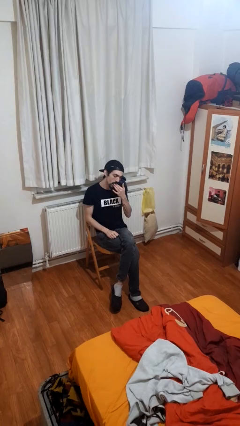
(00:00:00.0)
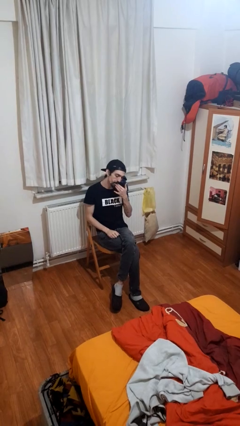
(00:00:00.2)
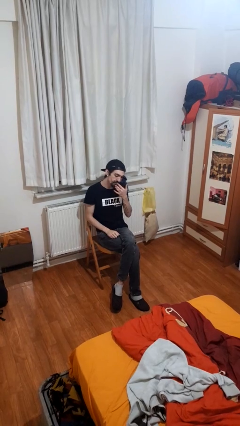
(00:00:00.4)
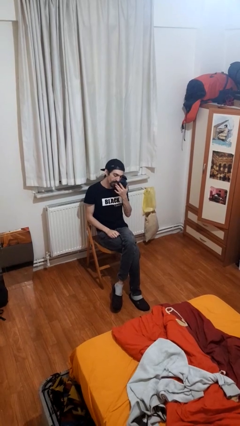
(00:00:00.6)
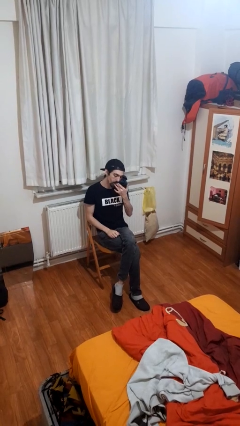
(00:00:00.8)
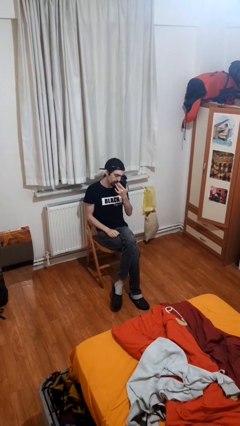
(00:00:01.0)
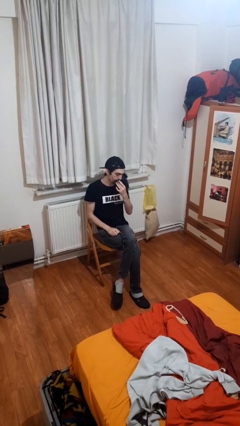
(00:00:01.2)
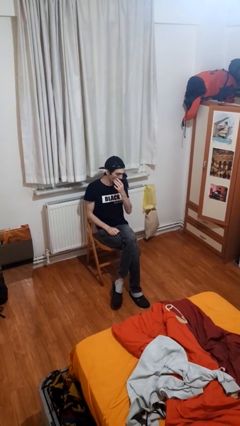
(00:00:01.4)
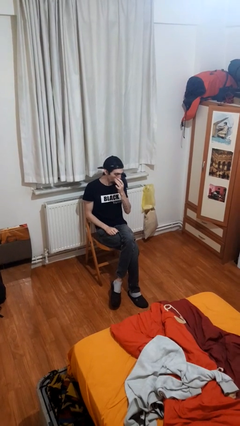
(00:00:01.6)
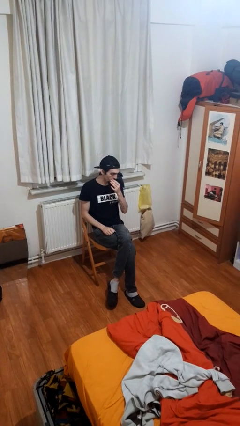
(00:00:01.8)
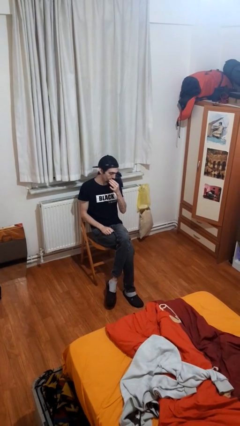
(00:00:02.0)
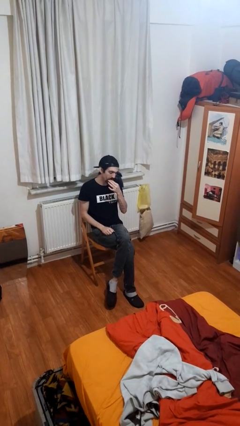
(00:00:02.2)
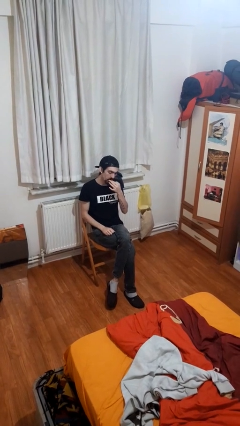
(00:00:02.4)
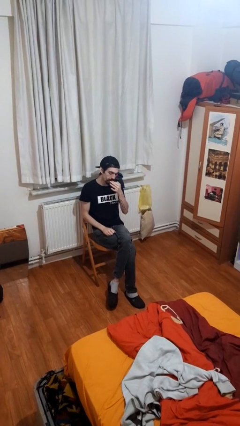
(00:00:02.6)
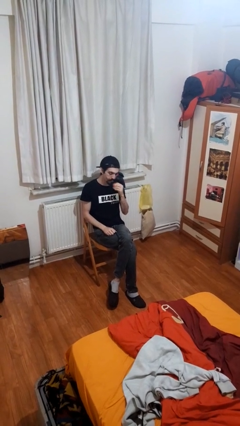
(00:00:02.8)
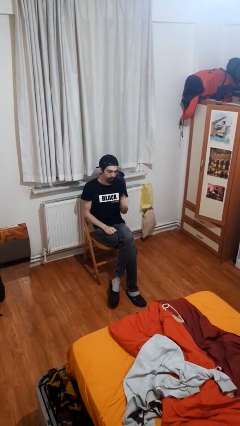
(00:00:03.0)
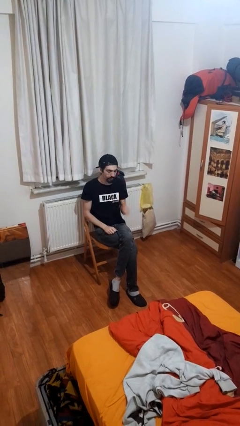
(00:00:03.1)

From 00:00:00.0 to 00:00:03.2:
person licks fingers

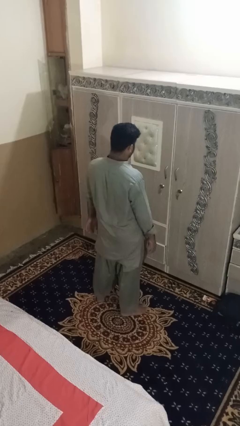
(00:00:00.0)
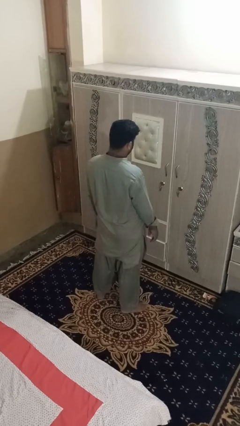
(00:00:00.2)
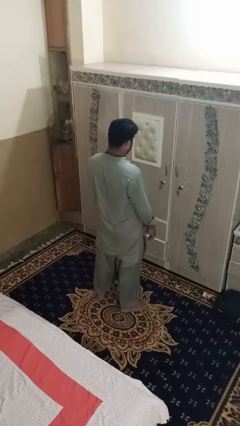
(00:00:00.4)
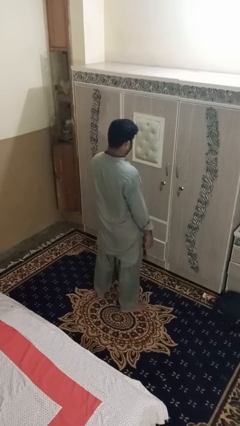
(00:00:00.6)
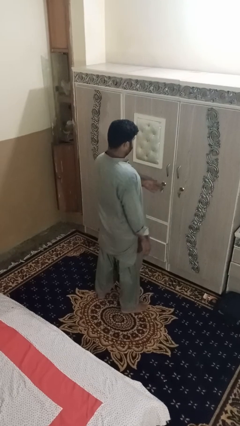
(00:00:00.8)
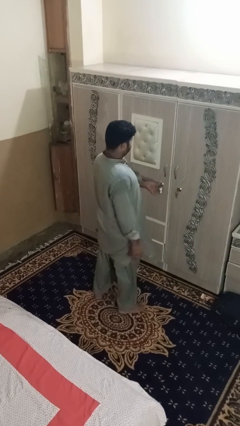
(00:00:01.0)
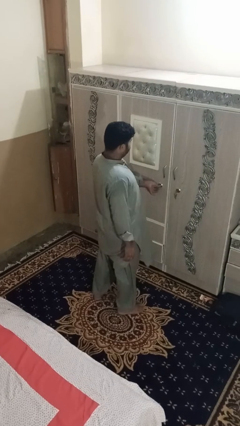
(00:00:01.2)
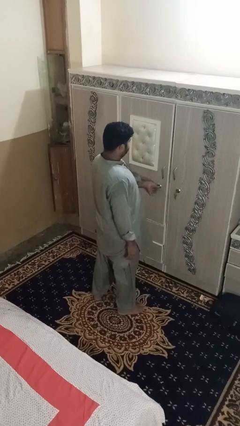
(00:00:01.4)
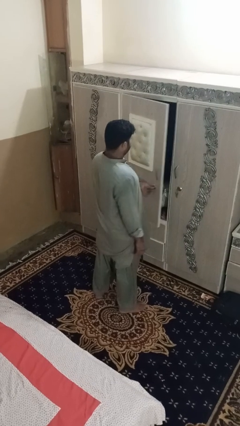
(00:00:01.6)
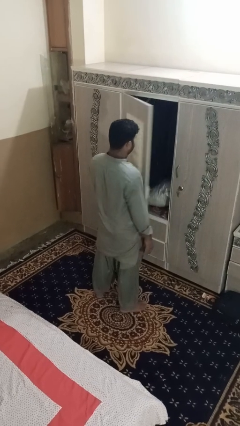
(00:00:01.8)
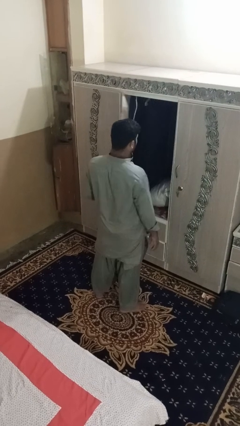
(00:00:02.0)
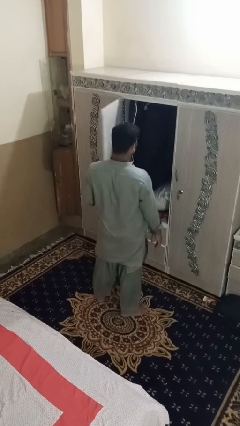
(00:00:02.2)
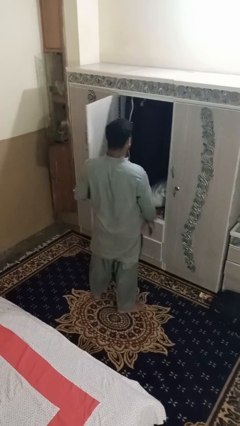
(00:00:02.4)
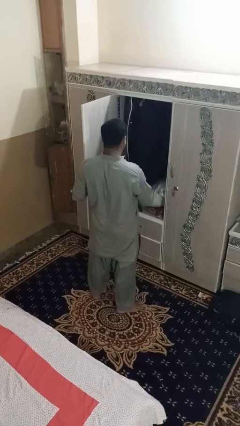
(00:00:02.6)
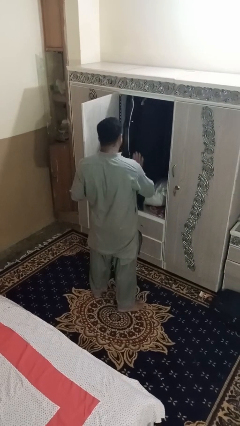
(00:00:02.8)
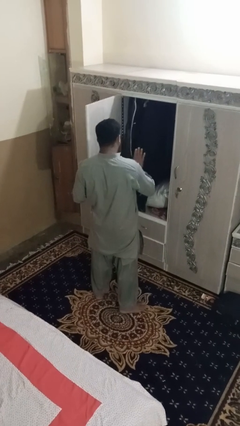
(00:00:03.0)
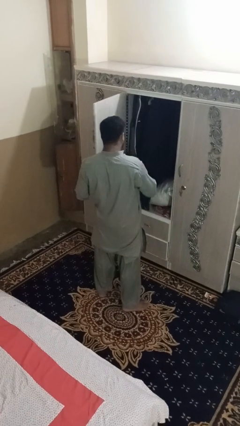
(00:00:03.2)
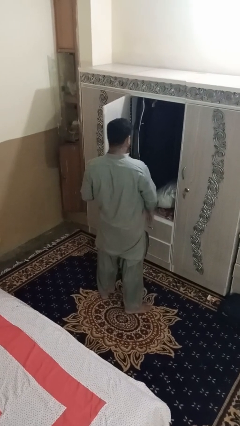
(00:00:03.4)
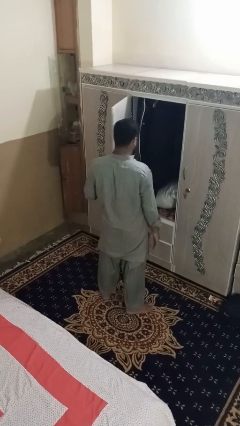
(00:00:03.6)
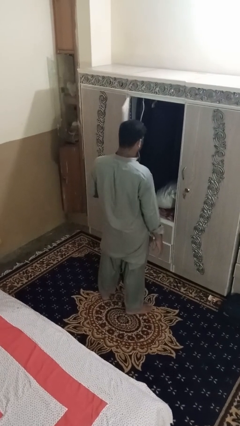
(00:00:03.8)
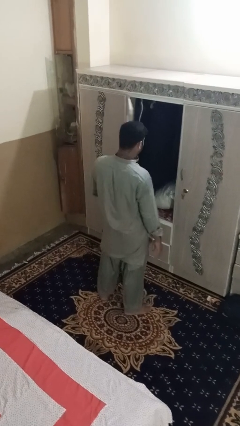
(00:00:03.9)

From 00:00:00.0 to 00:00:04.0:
person opens dresser drawer

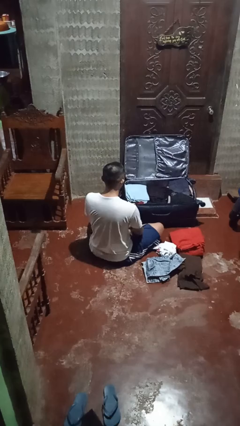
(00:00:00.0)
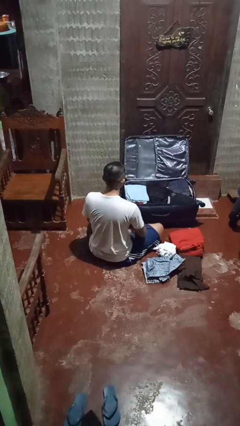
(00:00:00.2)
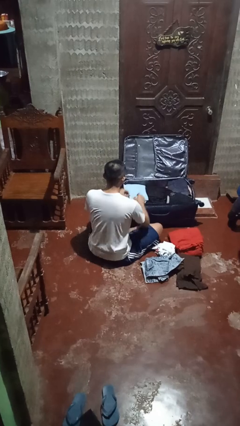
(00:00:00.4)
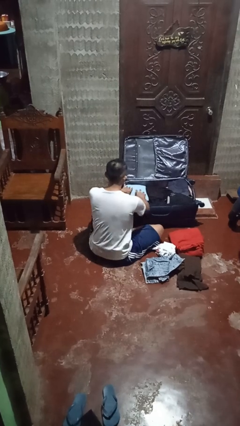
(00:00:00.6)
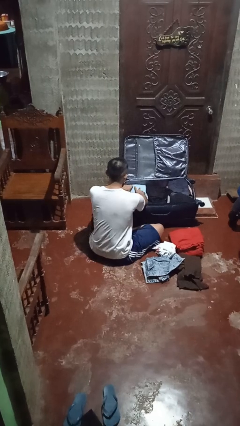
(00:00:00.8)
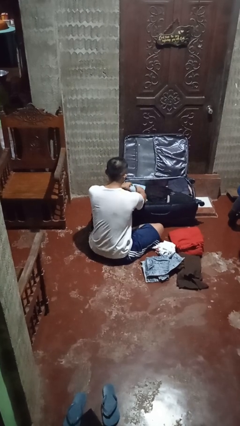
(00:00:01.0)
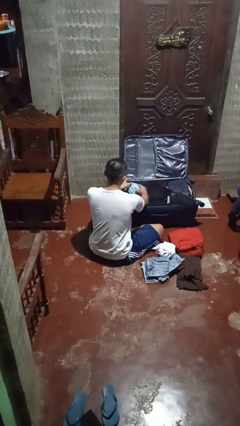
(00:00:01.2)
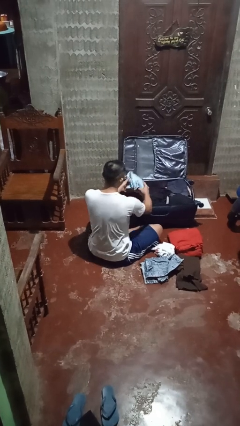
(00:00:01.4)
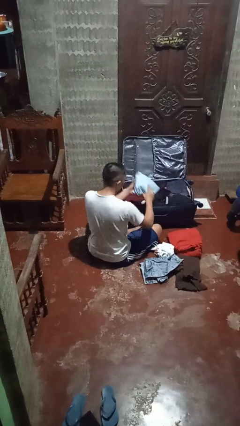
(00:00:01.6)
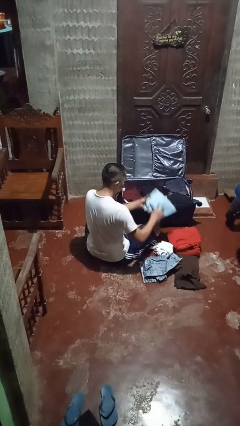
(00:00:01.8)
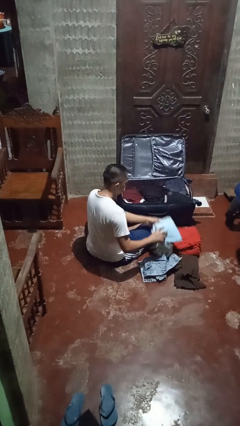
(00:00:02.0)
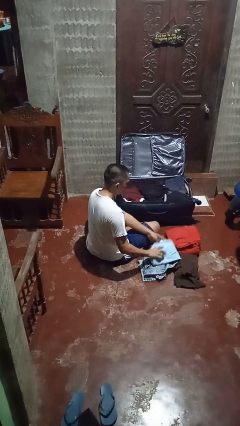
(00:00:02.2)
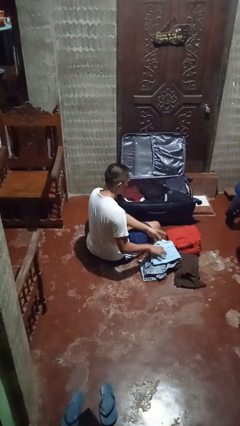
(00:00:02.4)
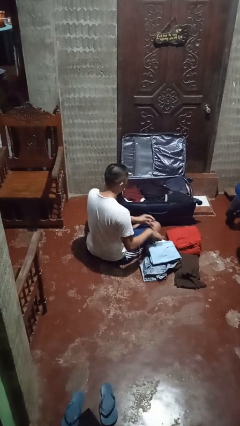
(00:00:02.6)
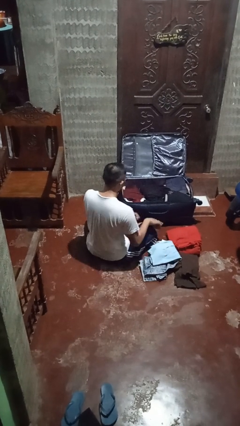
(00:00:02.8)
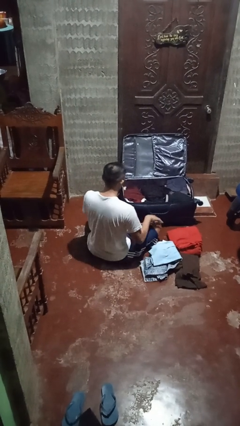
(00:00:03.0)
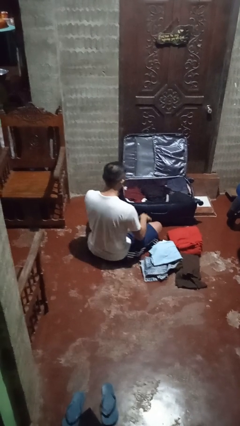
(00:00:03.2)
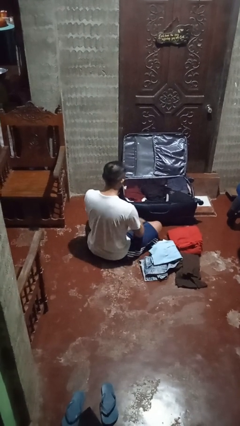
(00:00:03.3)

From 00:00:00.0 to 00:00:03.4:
person unloads clothes from suitcase

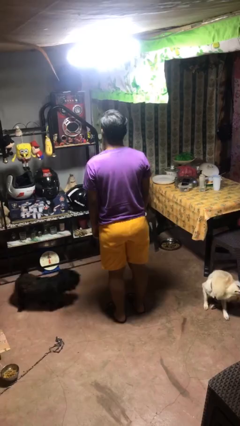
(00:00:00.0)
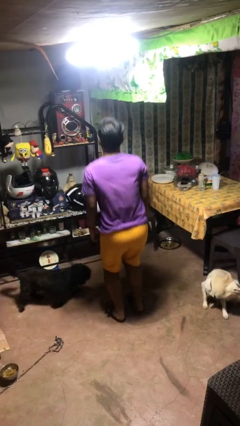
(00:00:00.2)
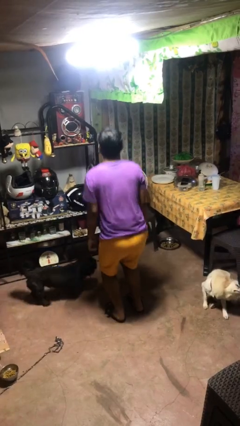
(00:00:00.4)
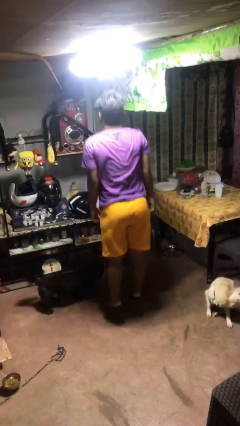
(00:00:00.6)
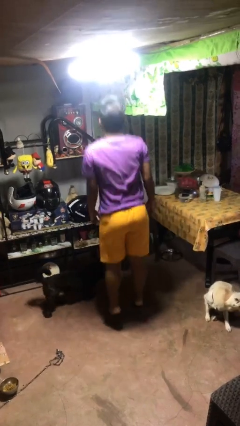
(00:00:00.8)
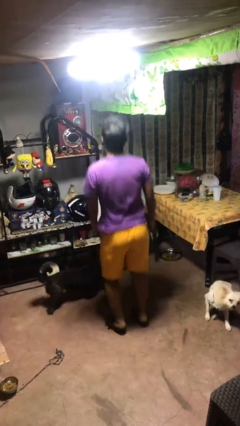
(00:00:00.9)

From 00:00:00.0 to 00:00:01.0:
person jumps

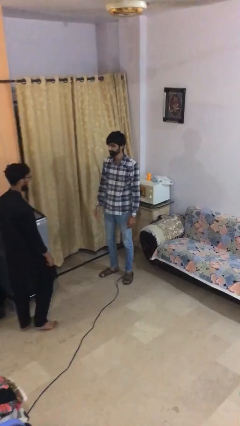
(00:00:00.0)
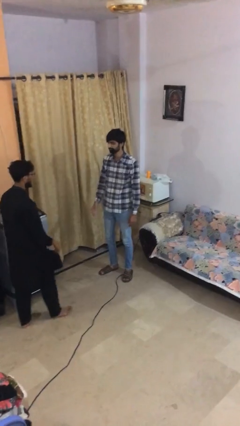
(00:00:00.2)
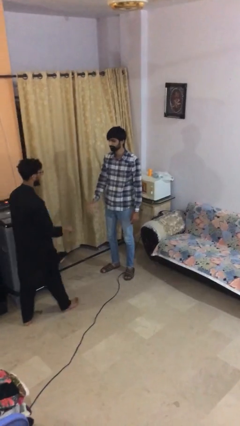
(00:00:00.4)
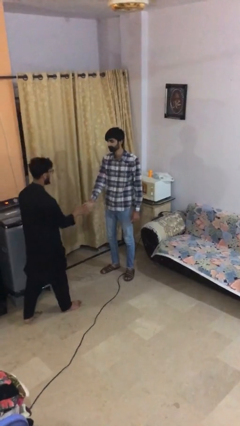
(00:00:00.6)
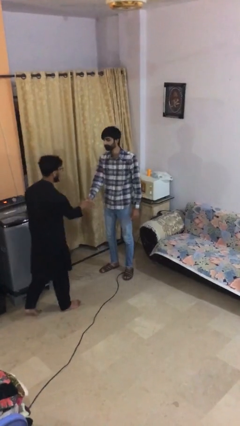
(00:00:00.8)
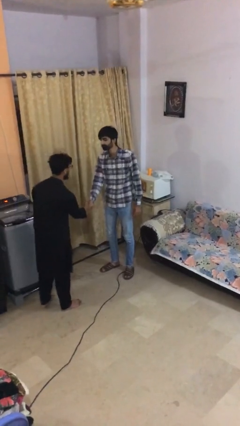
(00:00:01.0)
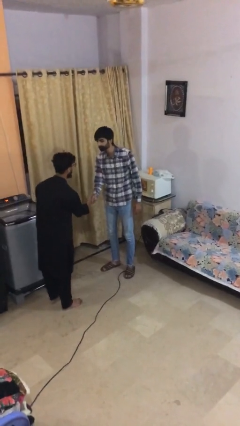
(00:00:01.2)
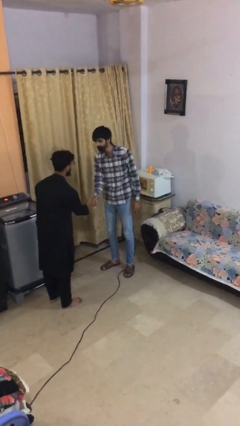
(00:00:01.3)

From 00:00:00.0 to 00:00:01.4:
person shakes hand

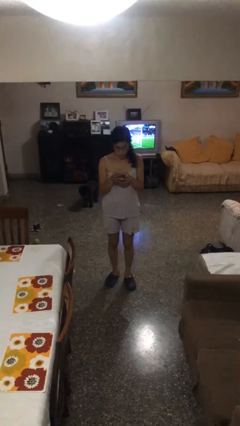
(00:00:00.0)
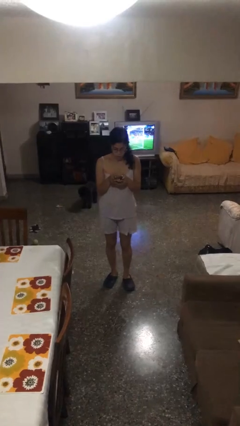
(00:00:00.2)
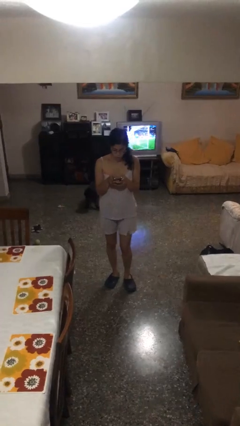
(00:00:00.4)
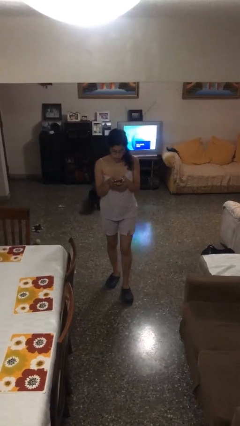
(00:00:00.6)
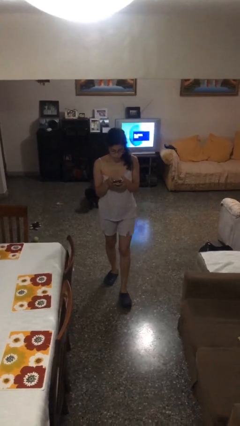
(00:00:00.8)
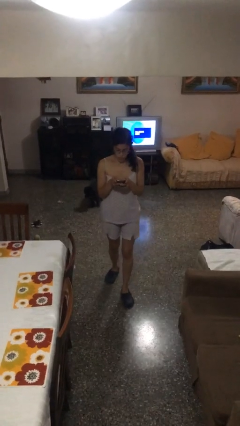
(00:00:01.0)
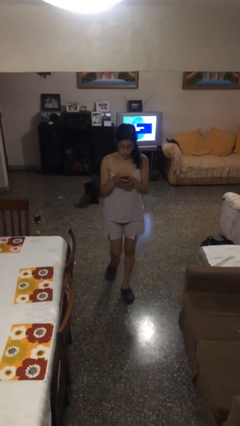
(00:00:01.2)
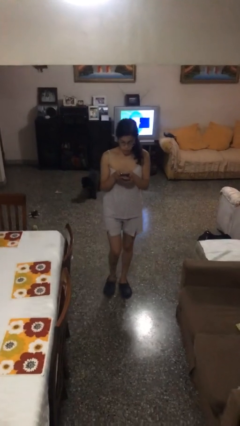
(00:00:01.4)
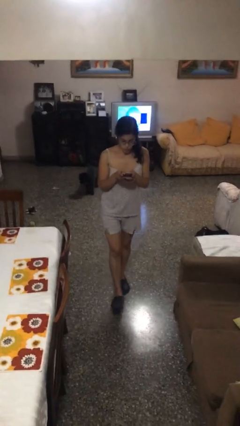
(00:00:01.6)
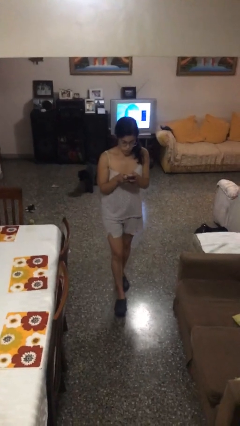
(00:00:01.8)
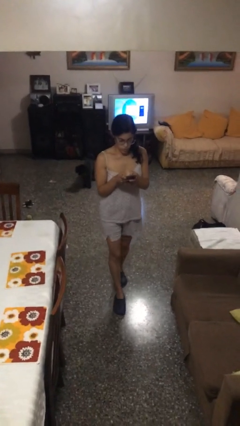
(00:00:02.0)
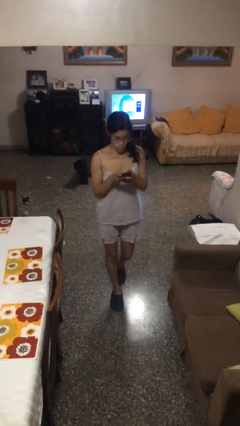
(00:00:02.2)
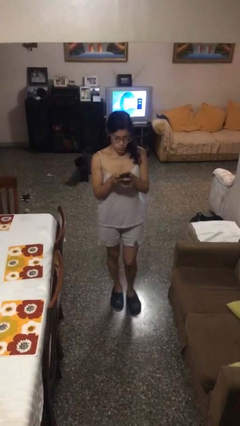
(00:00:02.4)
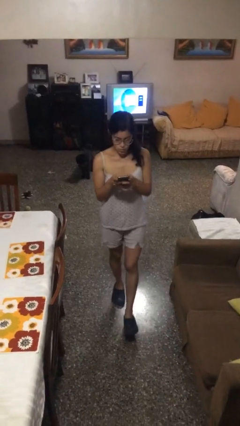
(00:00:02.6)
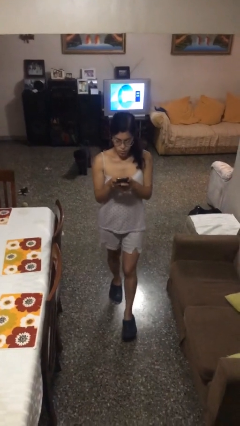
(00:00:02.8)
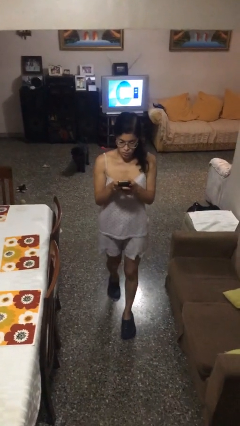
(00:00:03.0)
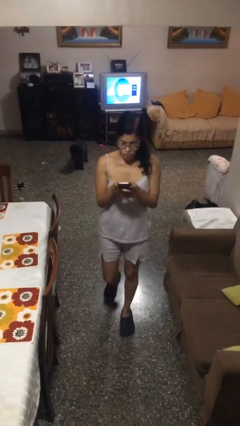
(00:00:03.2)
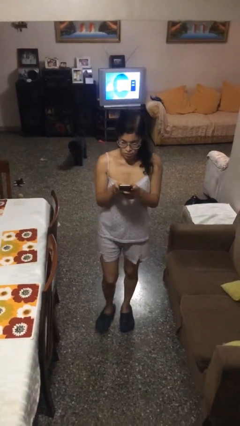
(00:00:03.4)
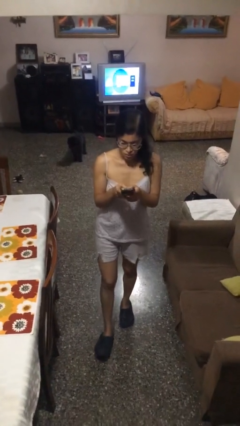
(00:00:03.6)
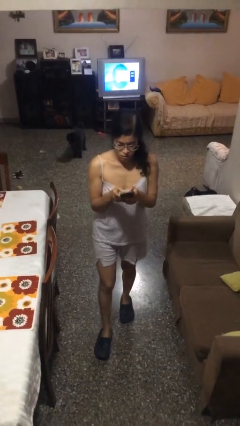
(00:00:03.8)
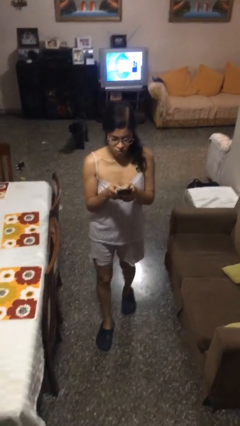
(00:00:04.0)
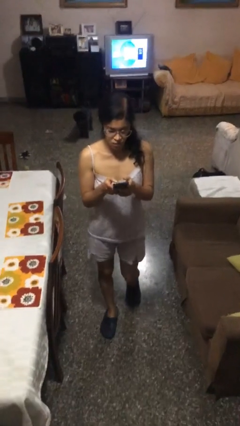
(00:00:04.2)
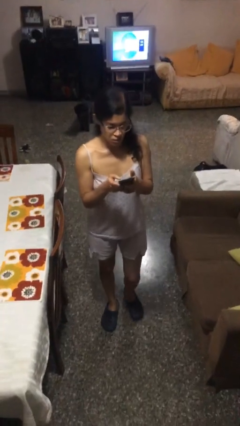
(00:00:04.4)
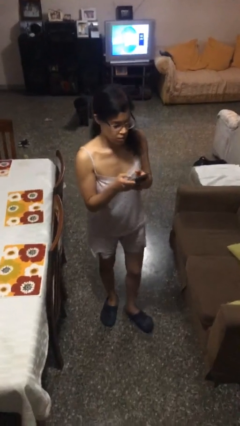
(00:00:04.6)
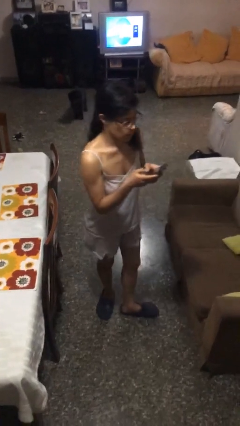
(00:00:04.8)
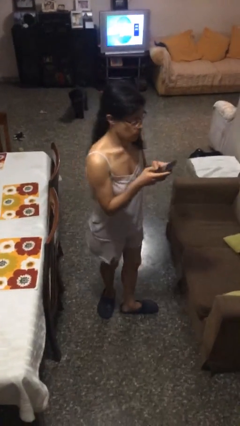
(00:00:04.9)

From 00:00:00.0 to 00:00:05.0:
person texts on phone
